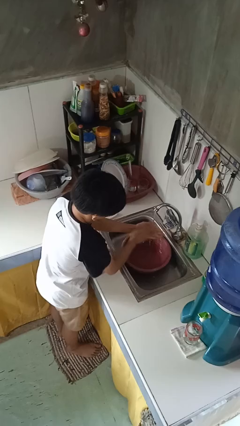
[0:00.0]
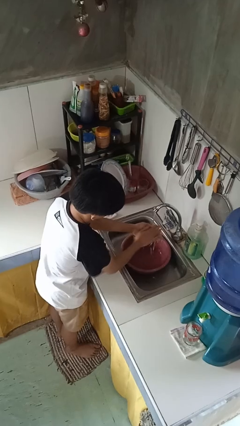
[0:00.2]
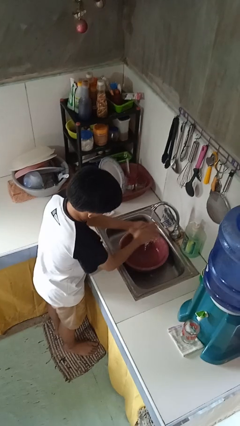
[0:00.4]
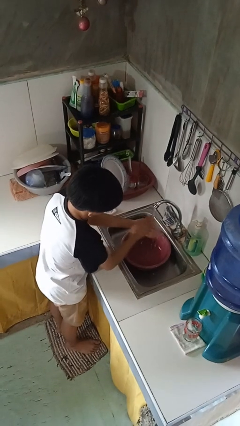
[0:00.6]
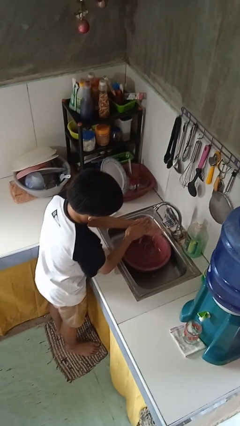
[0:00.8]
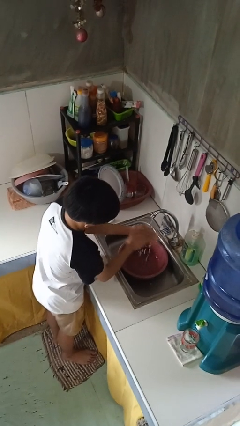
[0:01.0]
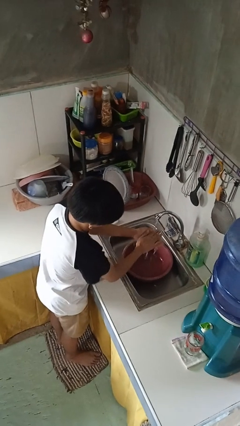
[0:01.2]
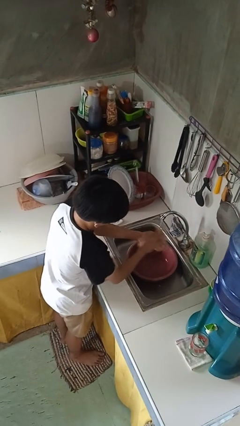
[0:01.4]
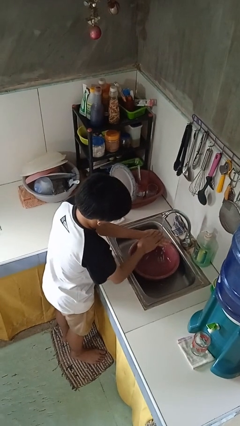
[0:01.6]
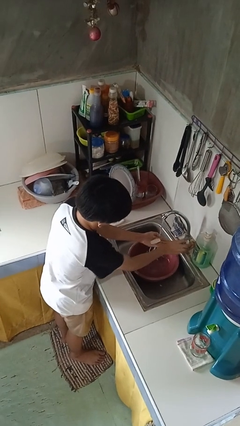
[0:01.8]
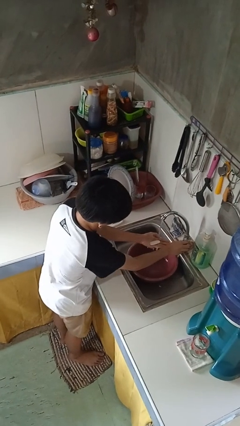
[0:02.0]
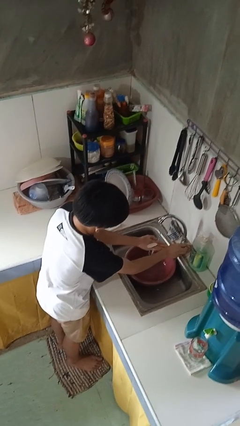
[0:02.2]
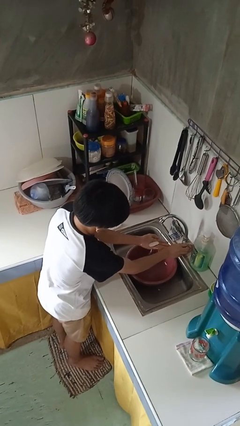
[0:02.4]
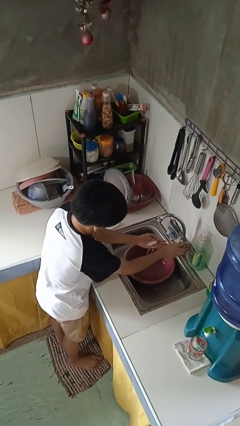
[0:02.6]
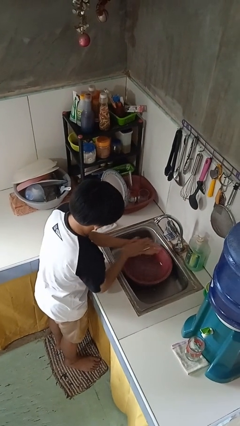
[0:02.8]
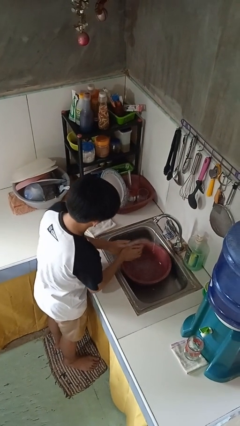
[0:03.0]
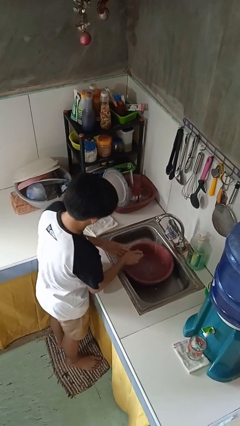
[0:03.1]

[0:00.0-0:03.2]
person washes hands

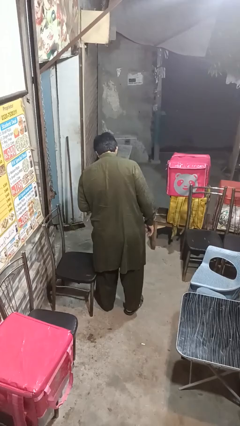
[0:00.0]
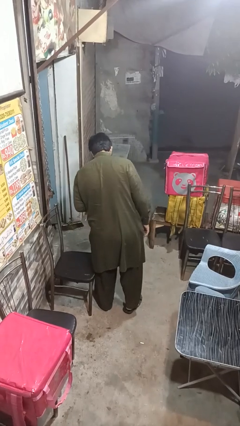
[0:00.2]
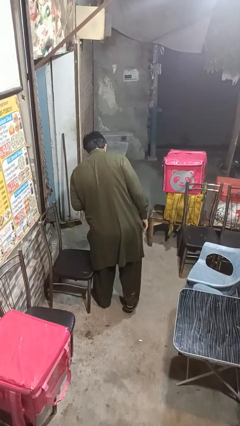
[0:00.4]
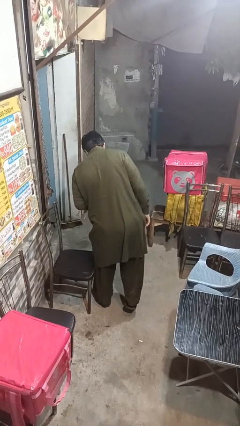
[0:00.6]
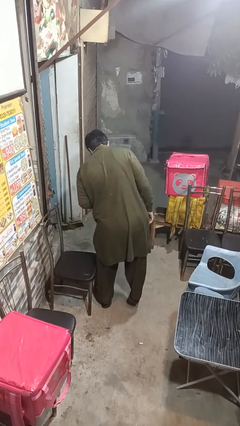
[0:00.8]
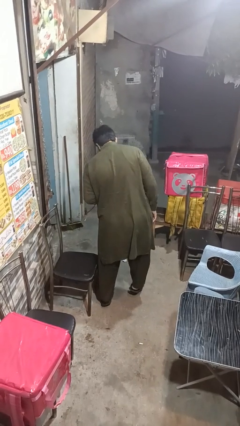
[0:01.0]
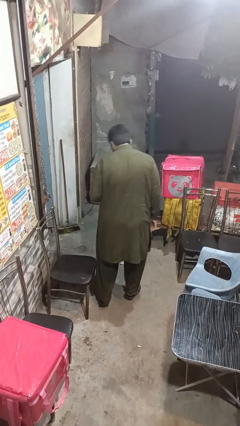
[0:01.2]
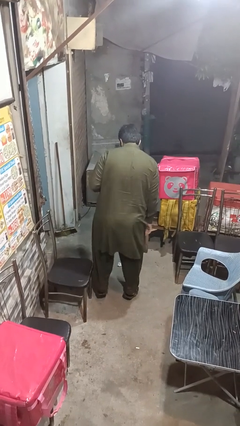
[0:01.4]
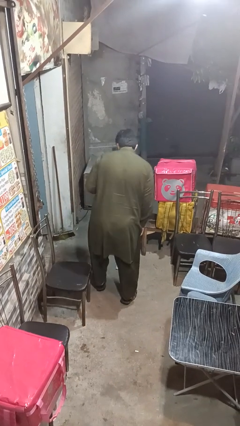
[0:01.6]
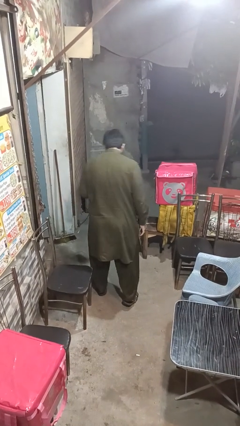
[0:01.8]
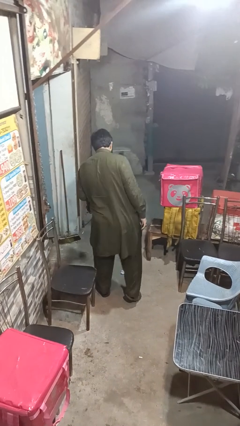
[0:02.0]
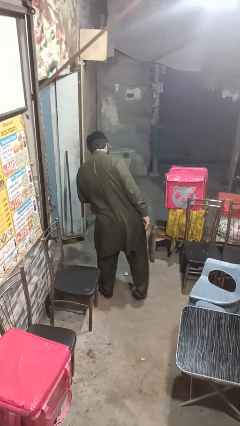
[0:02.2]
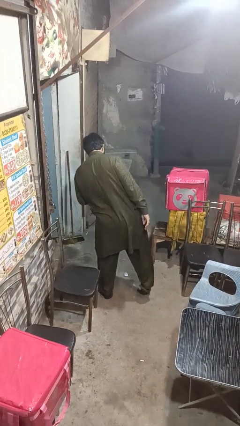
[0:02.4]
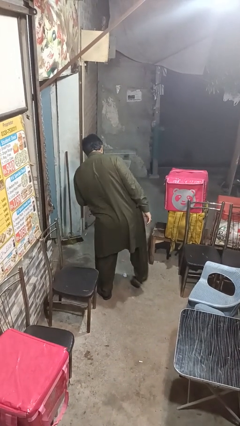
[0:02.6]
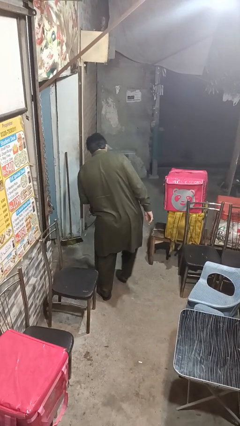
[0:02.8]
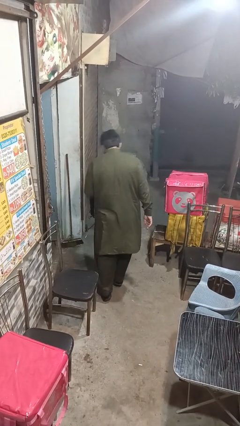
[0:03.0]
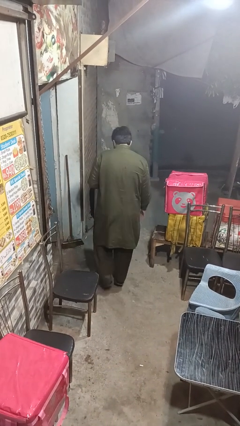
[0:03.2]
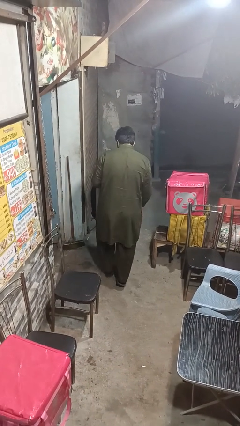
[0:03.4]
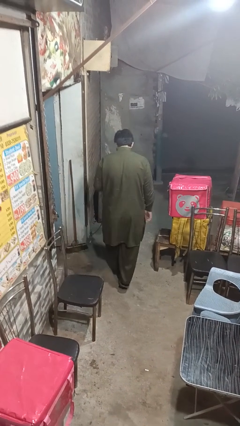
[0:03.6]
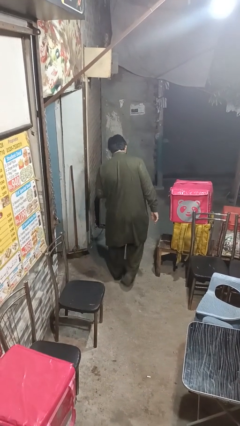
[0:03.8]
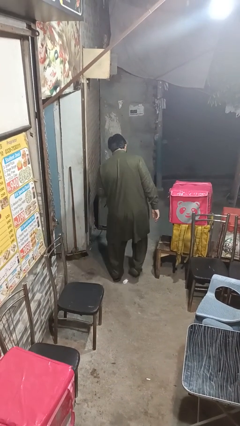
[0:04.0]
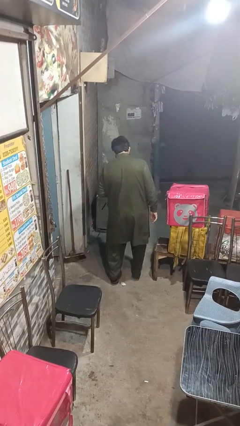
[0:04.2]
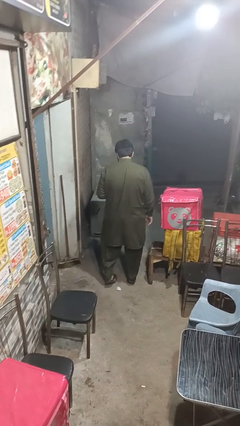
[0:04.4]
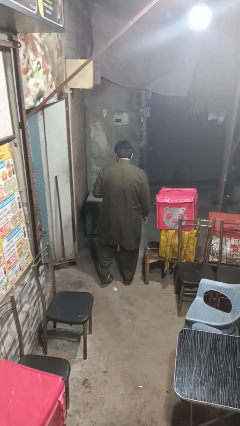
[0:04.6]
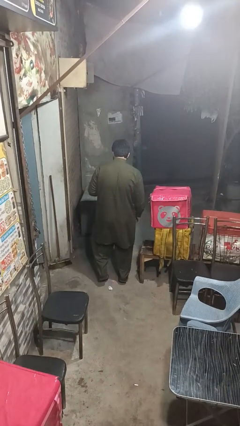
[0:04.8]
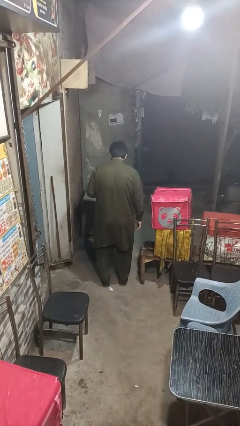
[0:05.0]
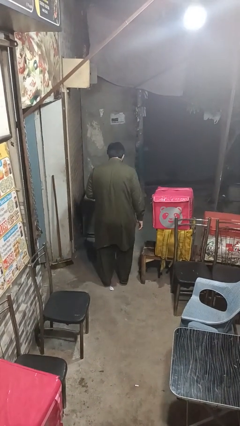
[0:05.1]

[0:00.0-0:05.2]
person walks tiptoe

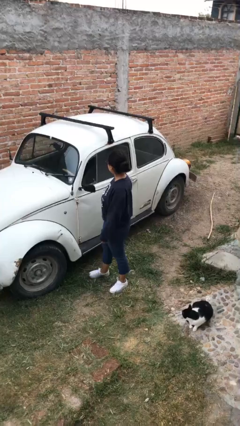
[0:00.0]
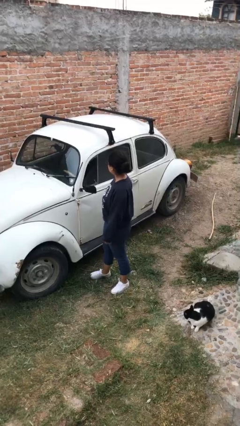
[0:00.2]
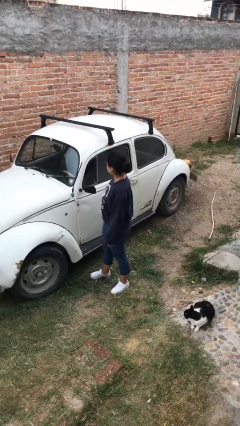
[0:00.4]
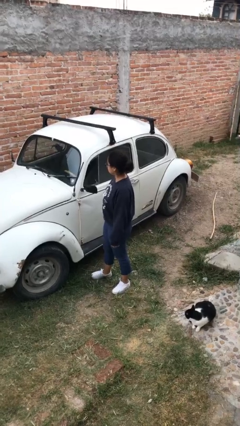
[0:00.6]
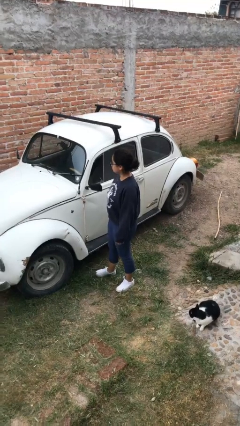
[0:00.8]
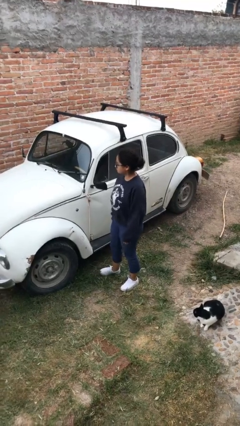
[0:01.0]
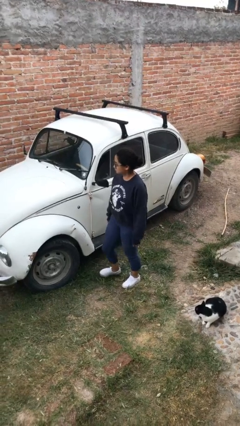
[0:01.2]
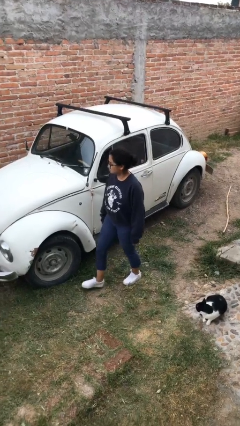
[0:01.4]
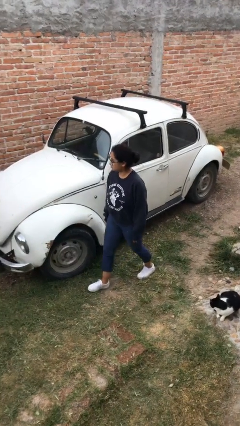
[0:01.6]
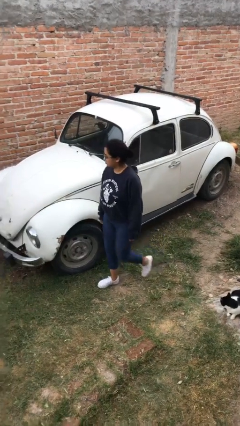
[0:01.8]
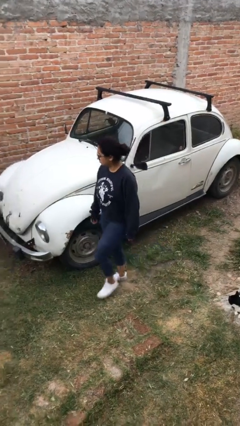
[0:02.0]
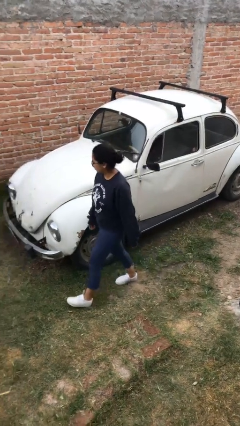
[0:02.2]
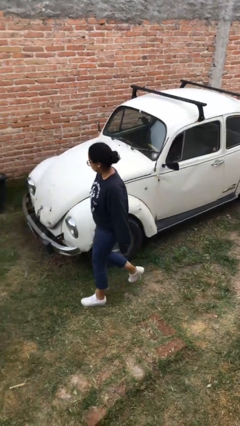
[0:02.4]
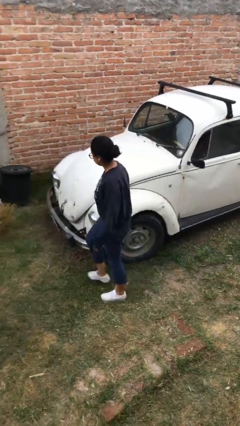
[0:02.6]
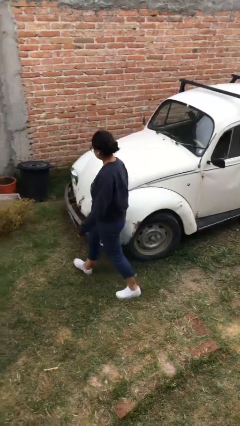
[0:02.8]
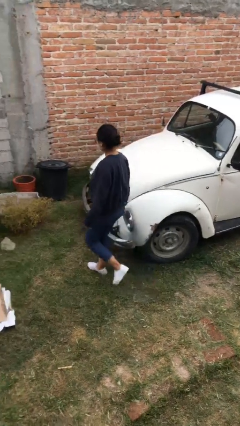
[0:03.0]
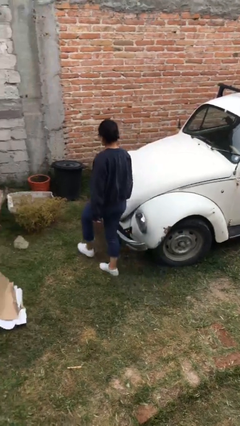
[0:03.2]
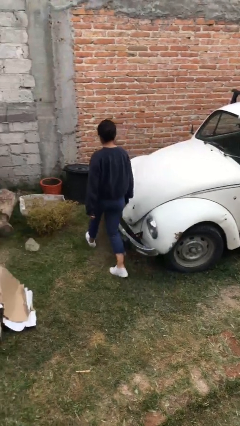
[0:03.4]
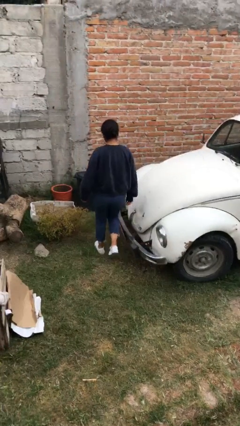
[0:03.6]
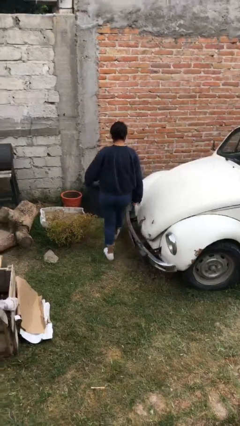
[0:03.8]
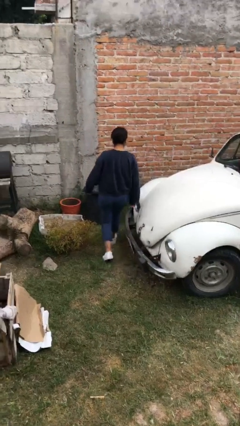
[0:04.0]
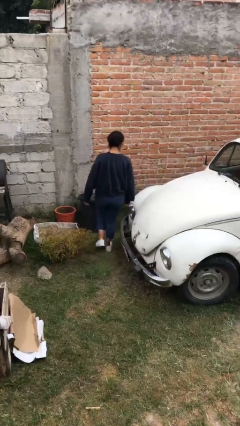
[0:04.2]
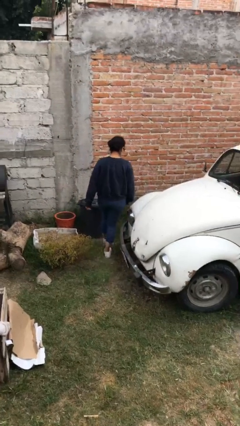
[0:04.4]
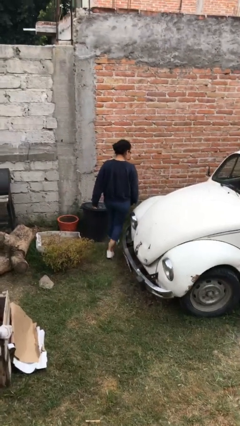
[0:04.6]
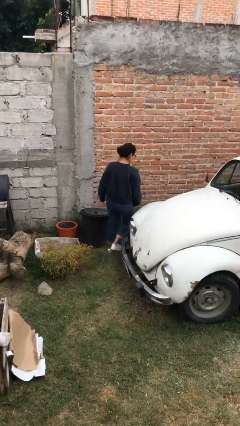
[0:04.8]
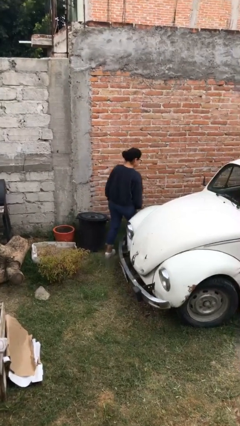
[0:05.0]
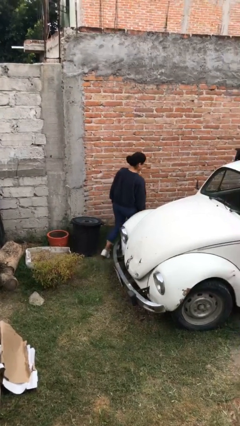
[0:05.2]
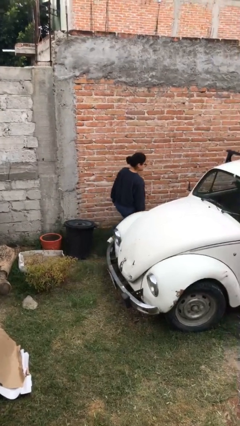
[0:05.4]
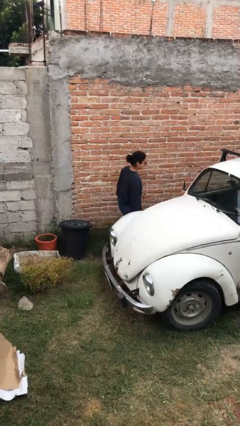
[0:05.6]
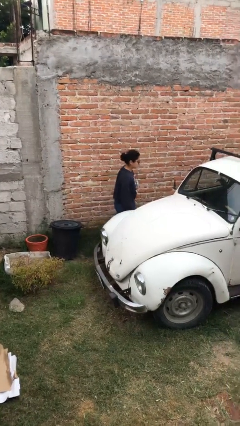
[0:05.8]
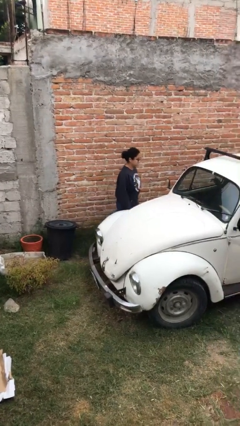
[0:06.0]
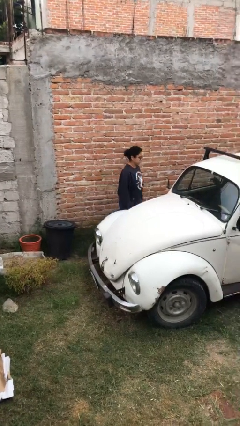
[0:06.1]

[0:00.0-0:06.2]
person walks around car

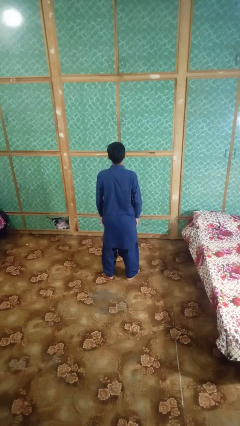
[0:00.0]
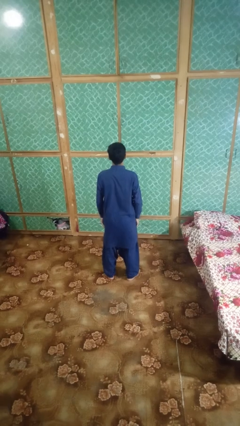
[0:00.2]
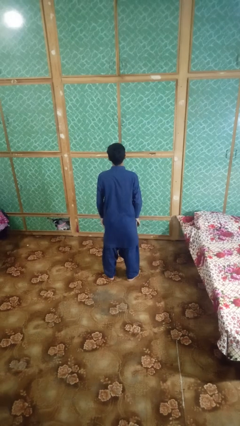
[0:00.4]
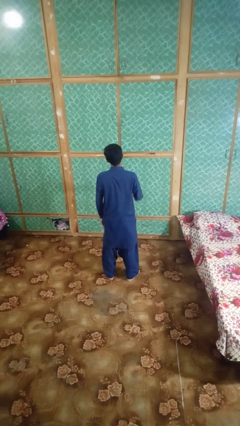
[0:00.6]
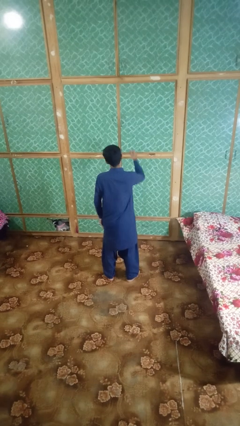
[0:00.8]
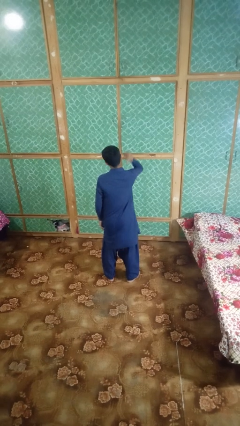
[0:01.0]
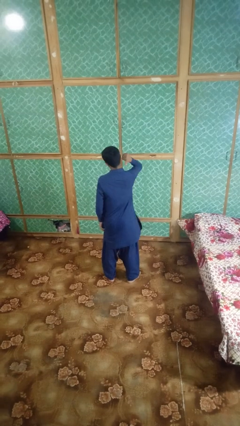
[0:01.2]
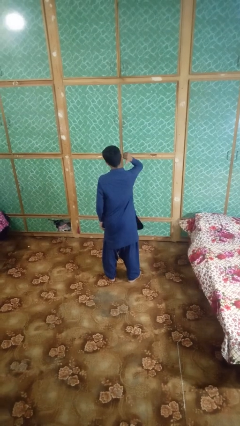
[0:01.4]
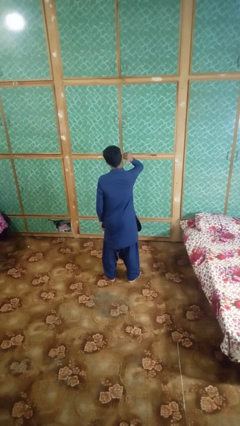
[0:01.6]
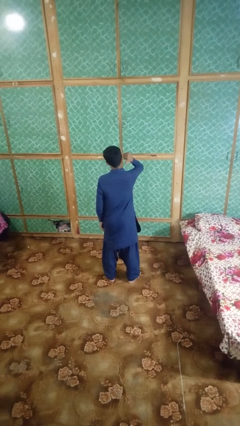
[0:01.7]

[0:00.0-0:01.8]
person gestures behind me

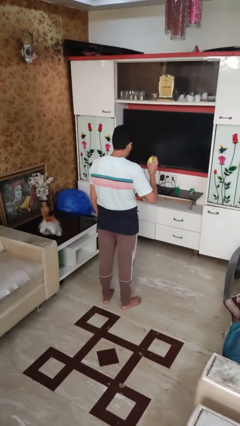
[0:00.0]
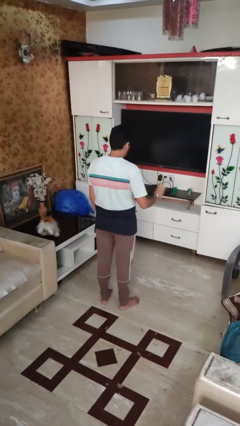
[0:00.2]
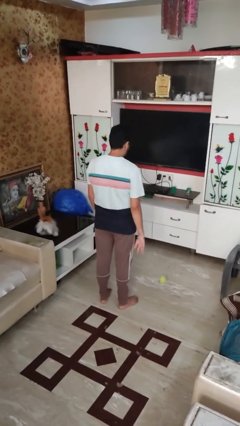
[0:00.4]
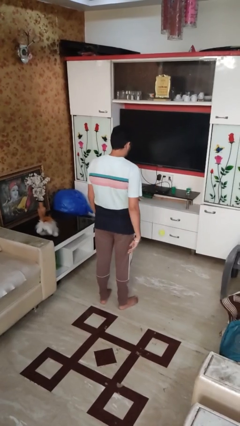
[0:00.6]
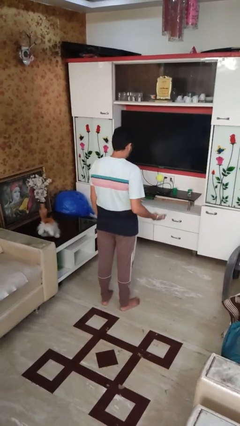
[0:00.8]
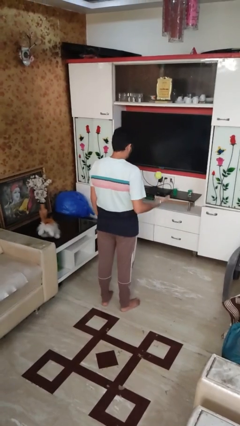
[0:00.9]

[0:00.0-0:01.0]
person bounces ball on floor

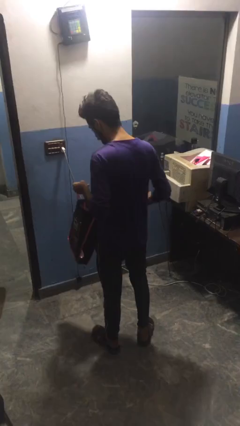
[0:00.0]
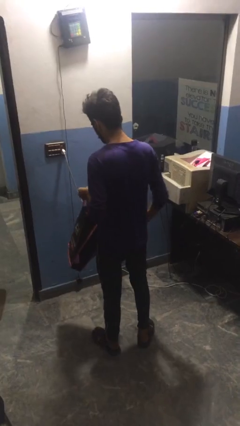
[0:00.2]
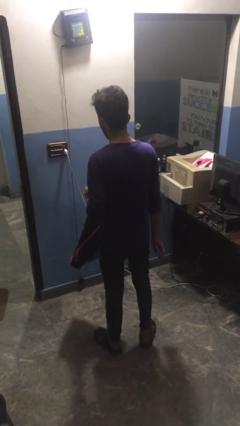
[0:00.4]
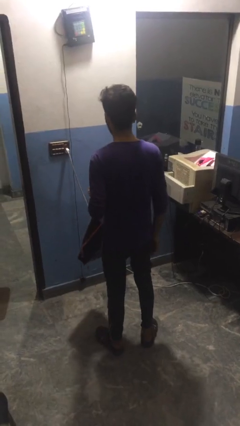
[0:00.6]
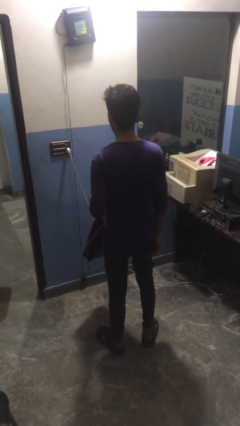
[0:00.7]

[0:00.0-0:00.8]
person puts object into bag
